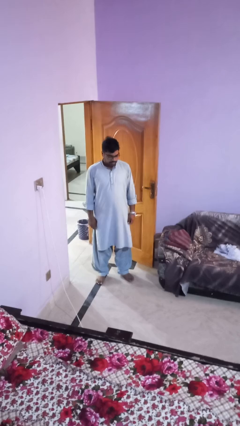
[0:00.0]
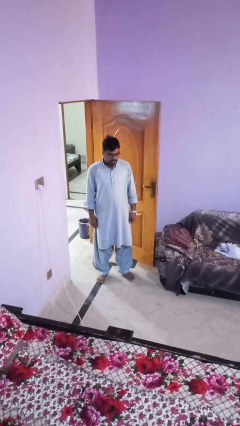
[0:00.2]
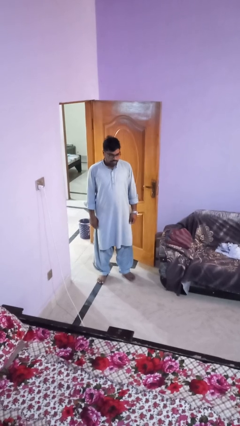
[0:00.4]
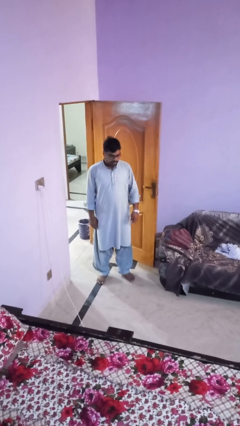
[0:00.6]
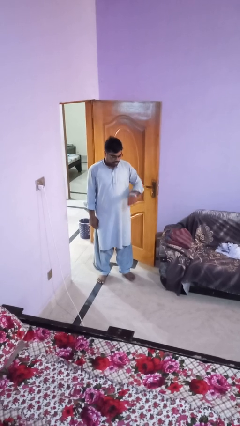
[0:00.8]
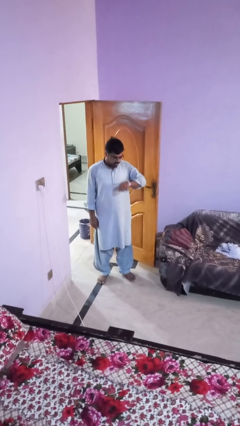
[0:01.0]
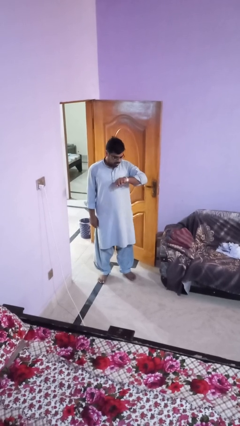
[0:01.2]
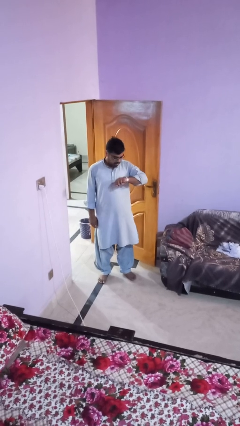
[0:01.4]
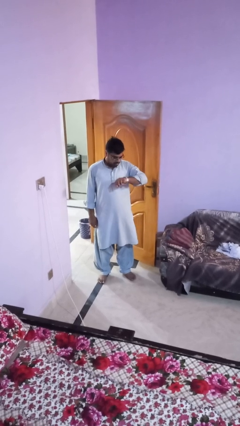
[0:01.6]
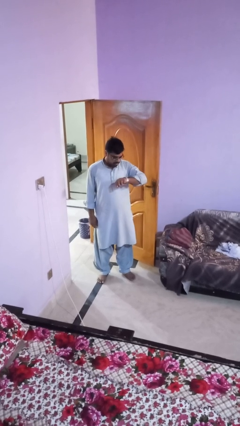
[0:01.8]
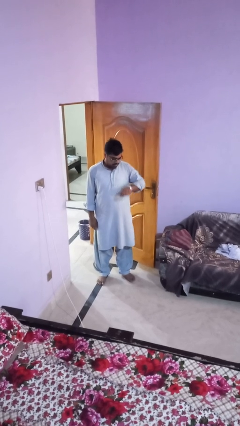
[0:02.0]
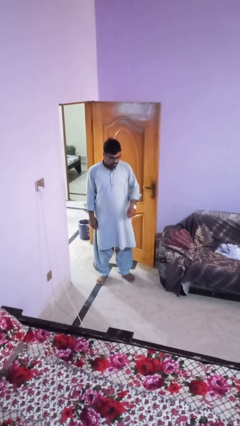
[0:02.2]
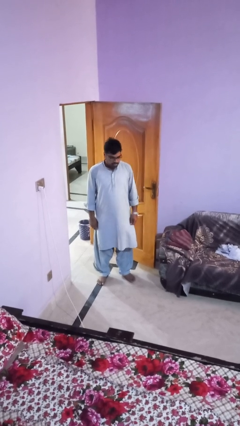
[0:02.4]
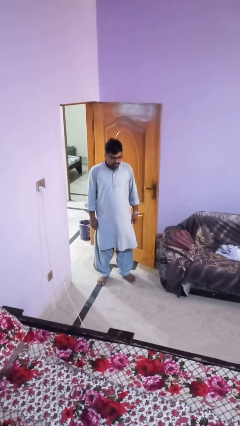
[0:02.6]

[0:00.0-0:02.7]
person looks at wristwatch

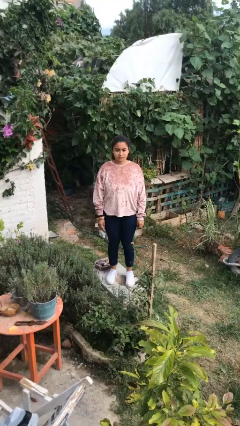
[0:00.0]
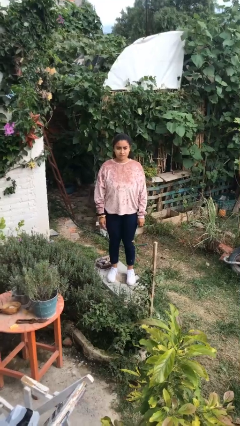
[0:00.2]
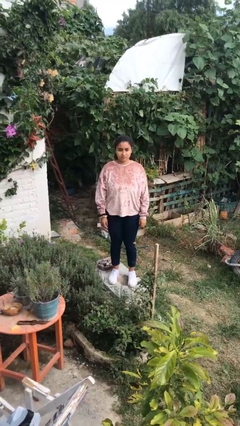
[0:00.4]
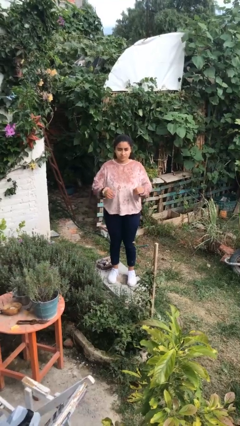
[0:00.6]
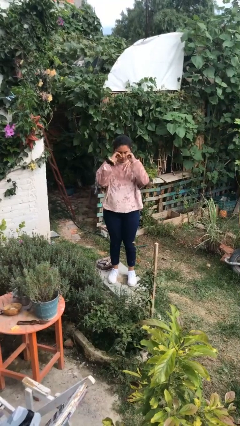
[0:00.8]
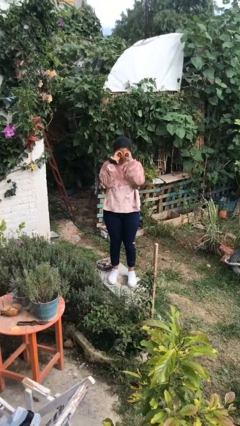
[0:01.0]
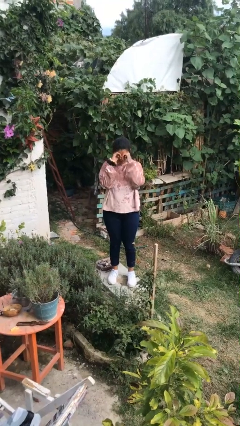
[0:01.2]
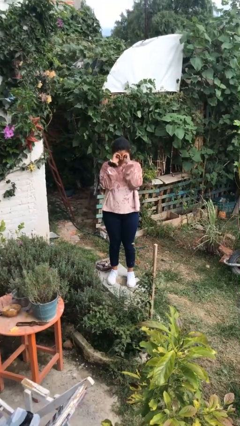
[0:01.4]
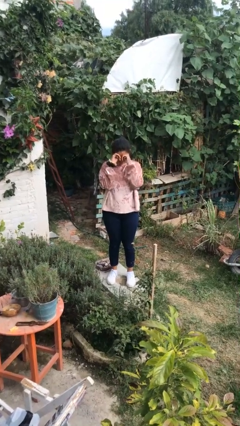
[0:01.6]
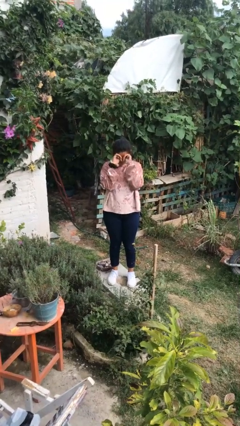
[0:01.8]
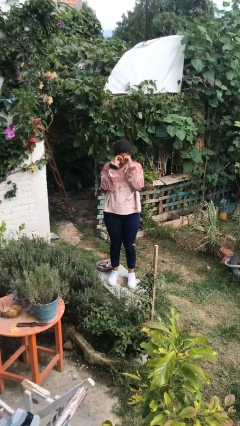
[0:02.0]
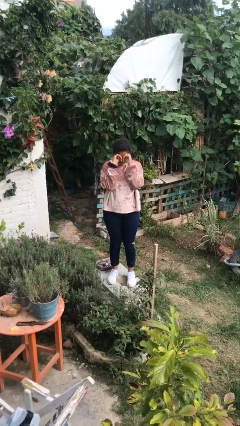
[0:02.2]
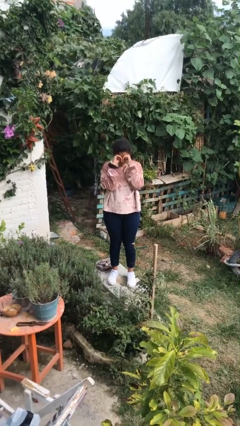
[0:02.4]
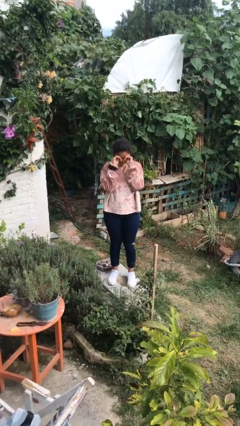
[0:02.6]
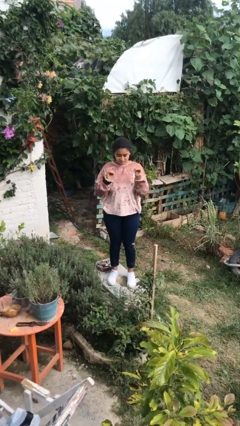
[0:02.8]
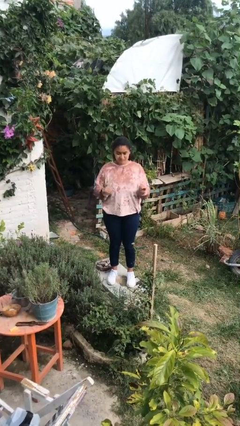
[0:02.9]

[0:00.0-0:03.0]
person rubs eyes

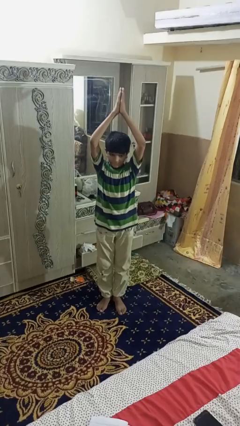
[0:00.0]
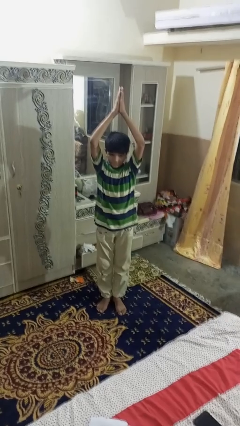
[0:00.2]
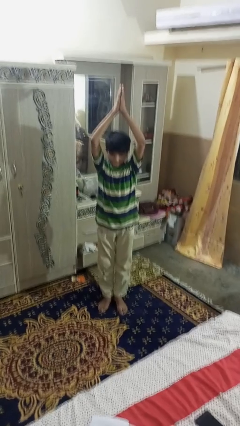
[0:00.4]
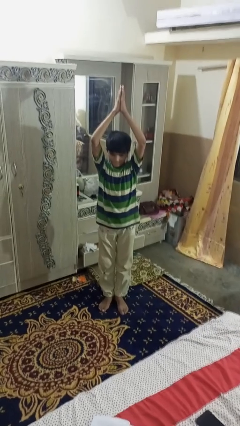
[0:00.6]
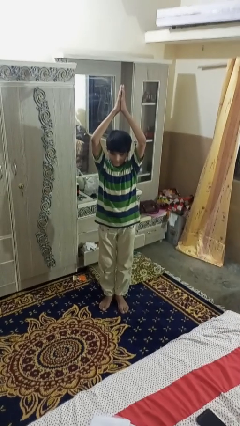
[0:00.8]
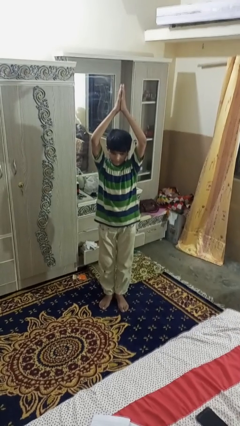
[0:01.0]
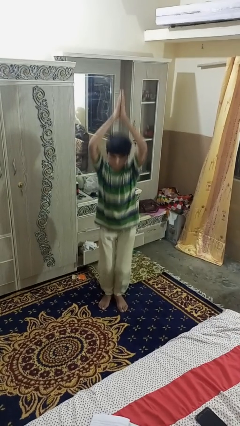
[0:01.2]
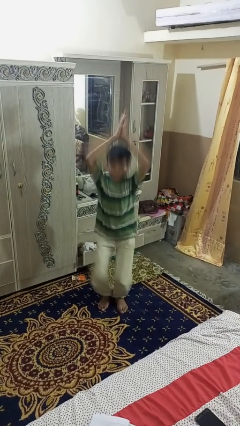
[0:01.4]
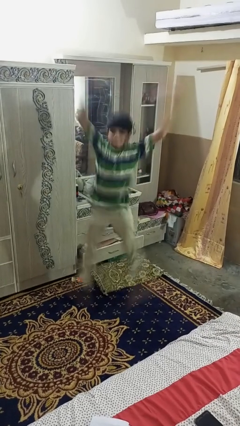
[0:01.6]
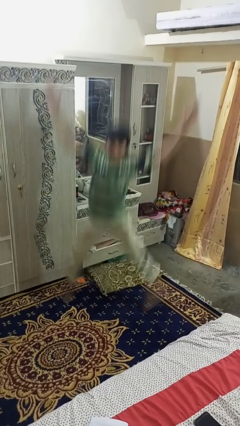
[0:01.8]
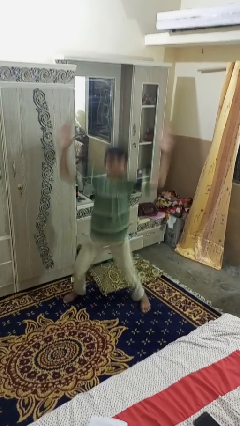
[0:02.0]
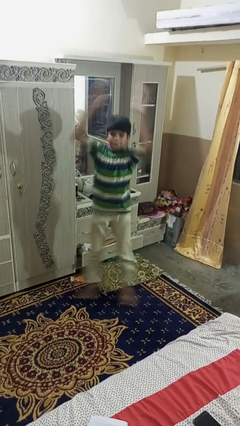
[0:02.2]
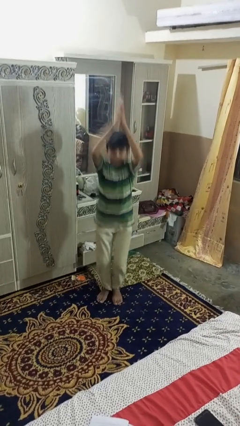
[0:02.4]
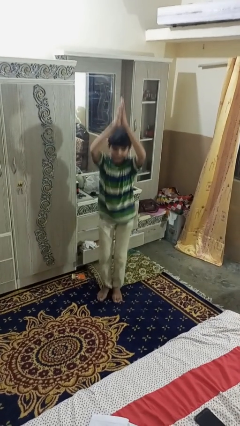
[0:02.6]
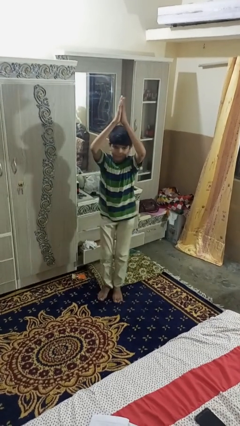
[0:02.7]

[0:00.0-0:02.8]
person exercises with jumping jacks

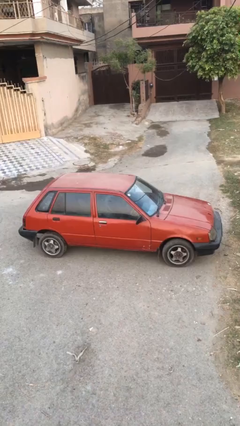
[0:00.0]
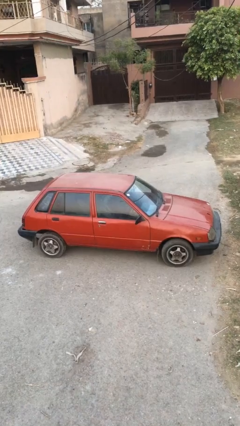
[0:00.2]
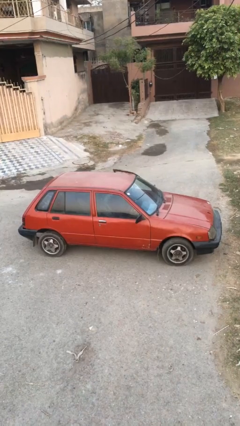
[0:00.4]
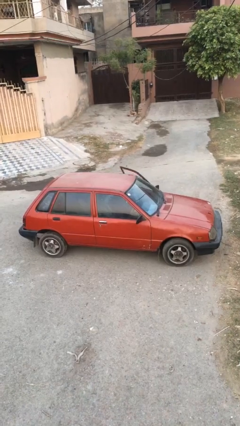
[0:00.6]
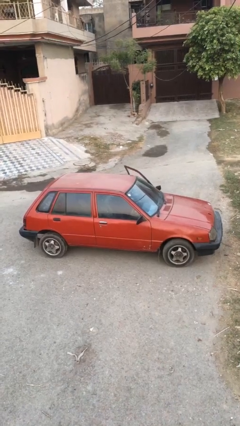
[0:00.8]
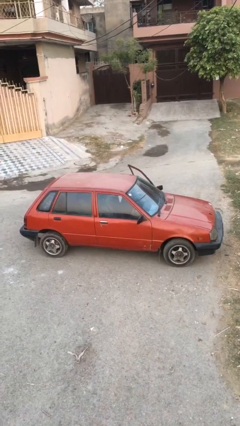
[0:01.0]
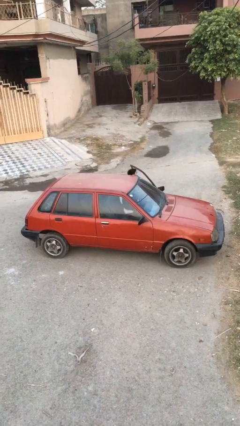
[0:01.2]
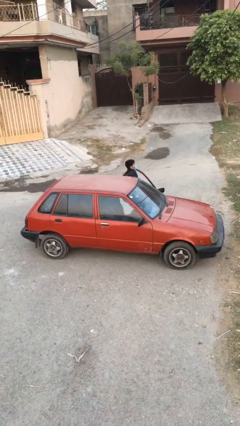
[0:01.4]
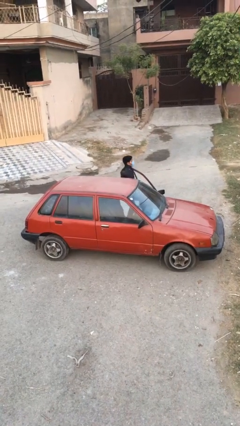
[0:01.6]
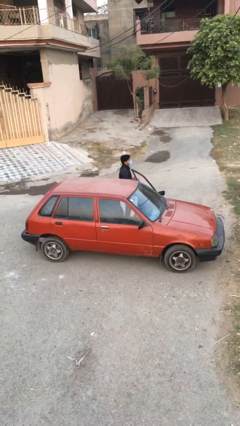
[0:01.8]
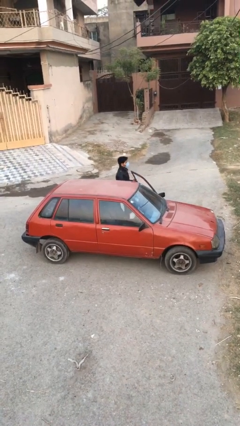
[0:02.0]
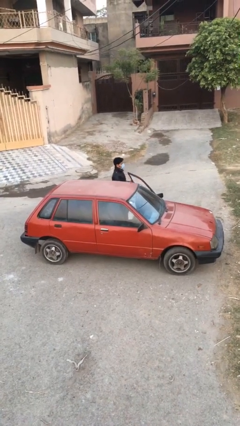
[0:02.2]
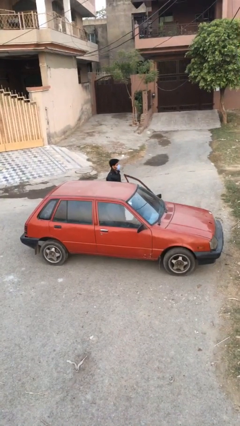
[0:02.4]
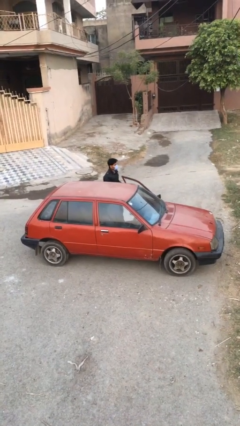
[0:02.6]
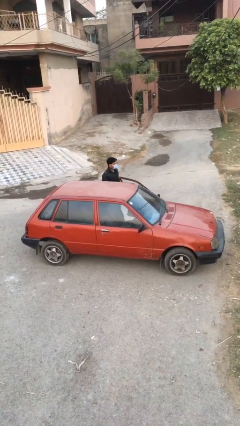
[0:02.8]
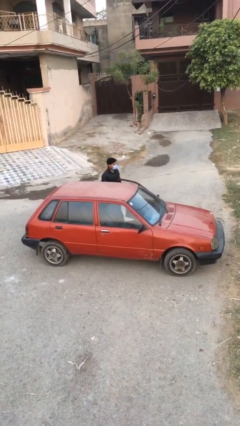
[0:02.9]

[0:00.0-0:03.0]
car drops off person

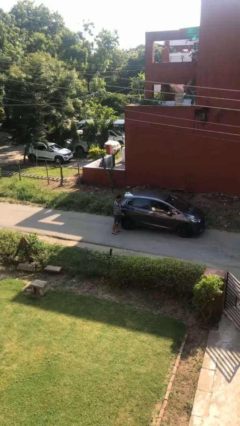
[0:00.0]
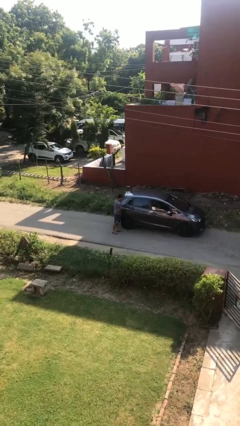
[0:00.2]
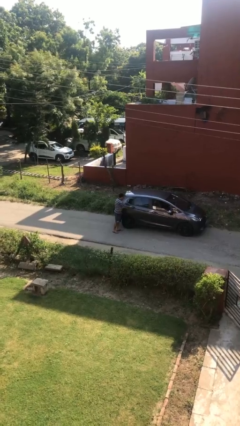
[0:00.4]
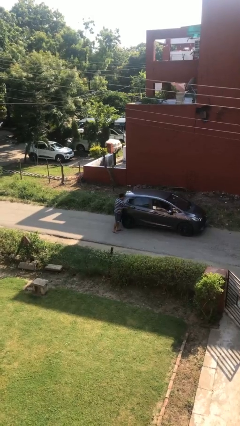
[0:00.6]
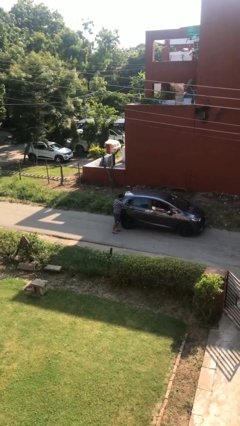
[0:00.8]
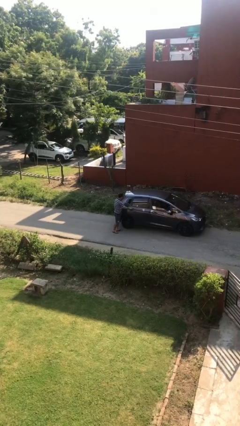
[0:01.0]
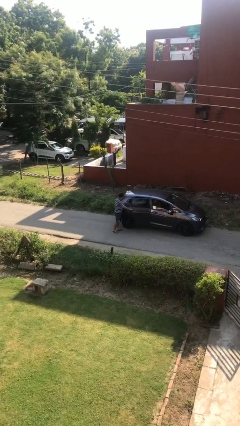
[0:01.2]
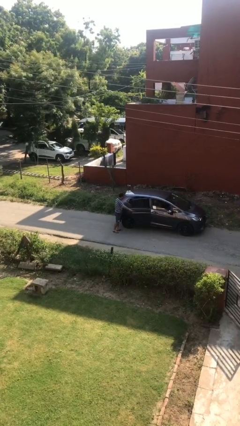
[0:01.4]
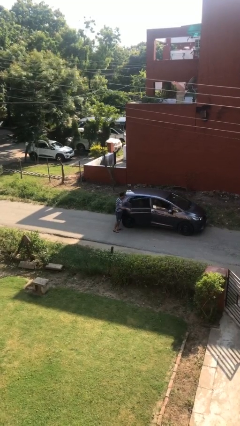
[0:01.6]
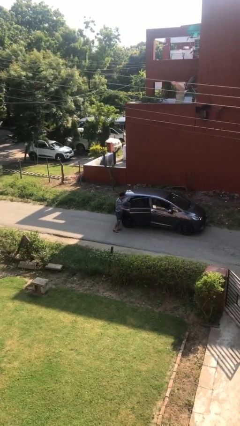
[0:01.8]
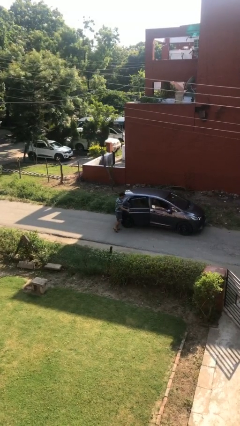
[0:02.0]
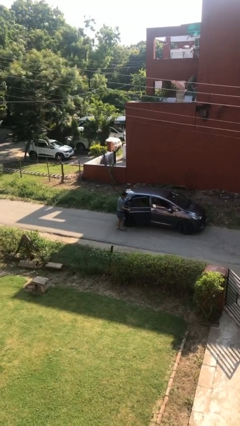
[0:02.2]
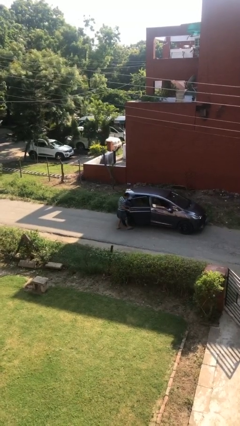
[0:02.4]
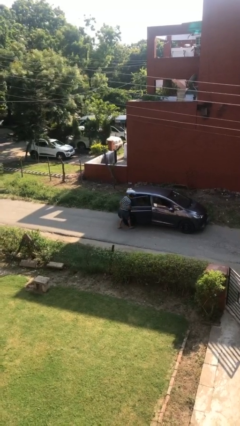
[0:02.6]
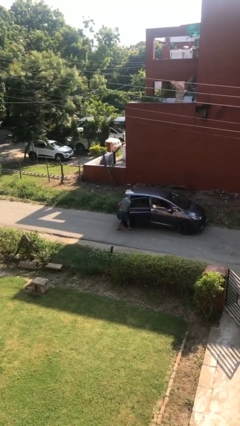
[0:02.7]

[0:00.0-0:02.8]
person opens car door

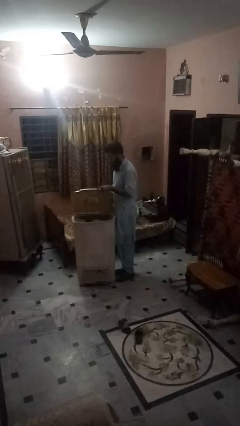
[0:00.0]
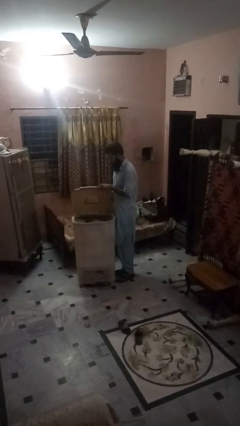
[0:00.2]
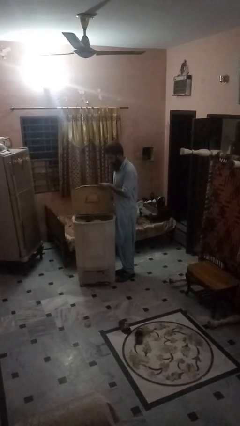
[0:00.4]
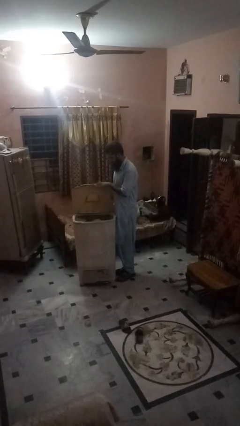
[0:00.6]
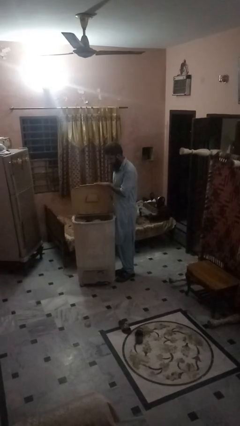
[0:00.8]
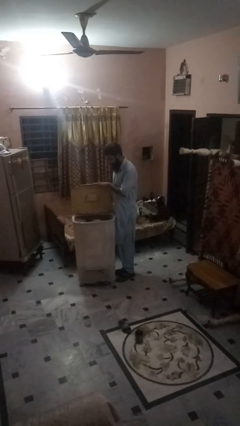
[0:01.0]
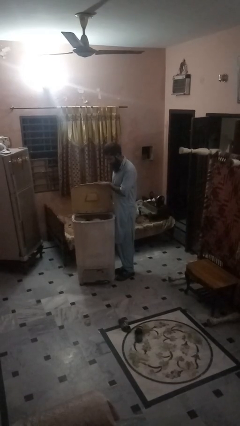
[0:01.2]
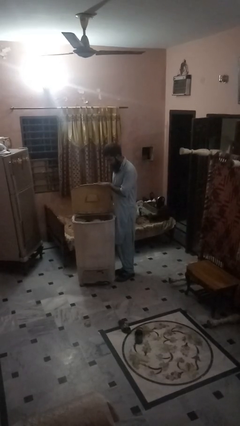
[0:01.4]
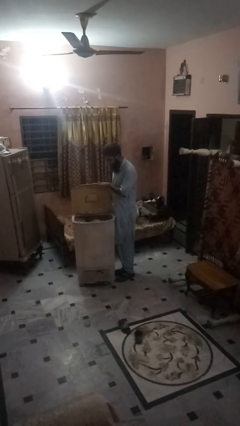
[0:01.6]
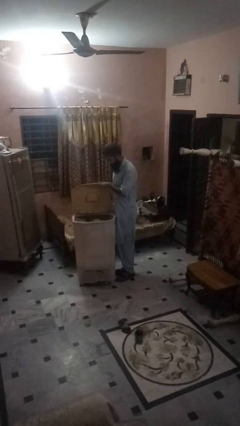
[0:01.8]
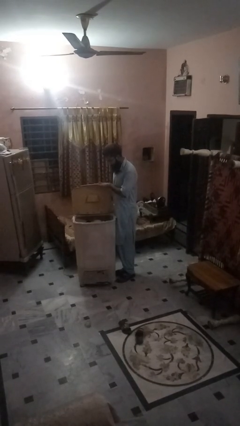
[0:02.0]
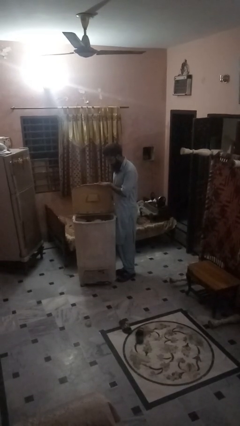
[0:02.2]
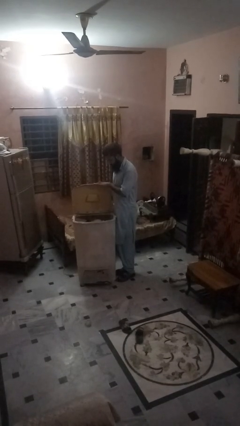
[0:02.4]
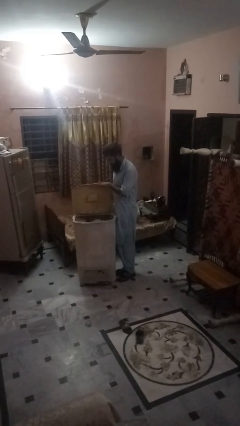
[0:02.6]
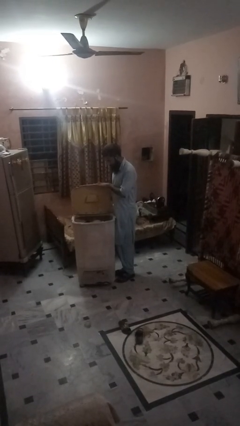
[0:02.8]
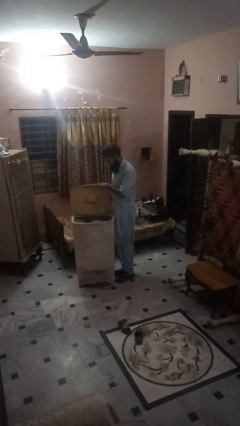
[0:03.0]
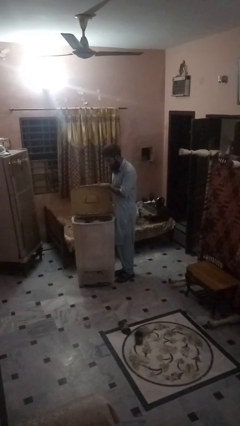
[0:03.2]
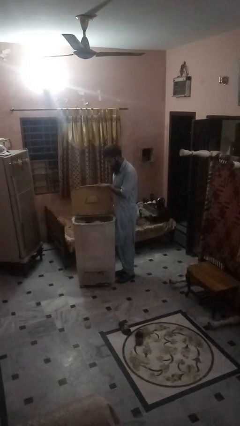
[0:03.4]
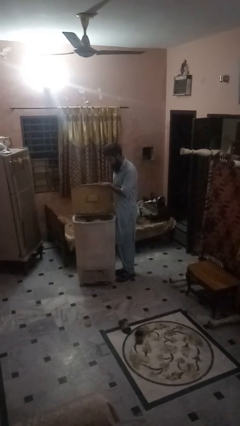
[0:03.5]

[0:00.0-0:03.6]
person opens clothes washer
